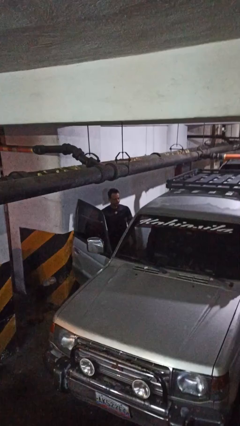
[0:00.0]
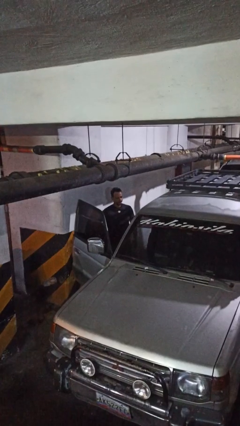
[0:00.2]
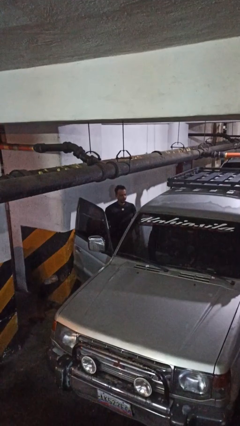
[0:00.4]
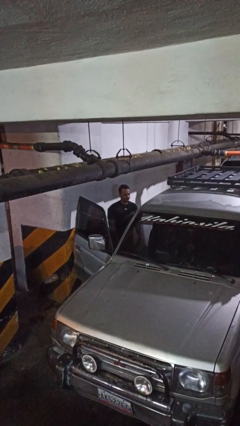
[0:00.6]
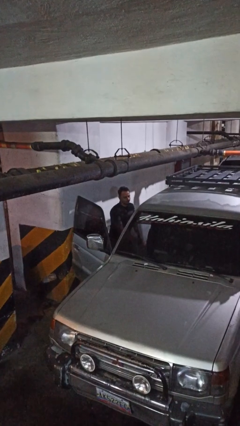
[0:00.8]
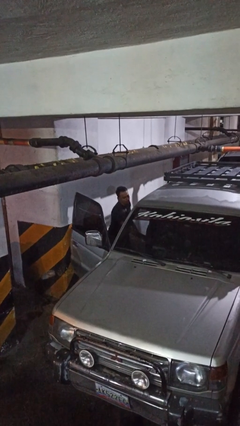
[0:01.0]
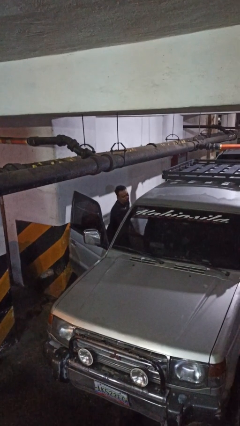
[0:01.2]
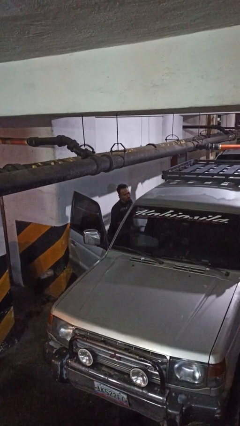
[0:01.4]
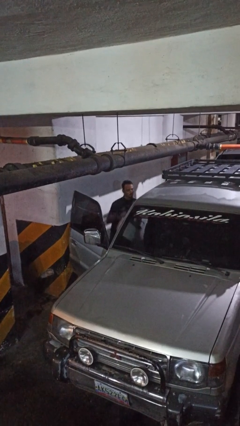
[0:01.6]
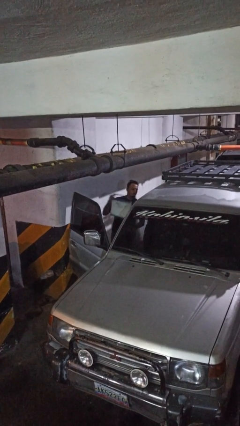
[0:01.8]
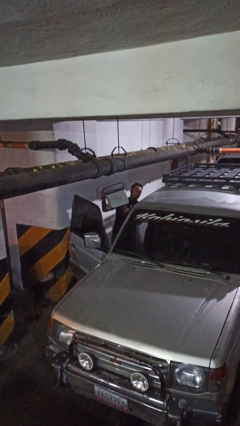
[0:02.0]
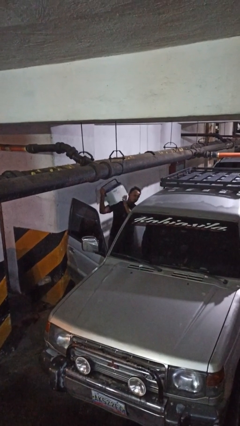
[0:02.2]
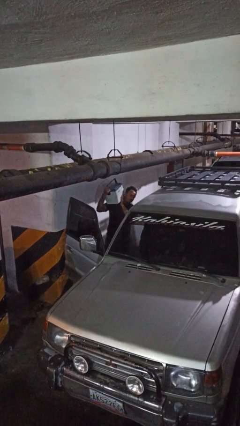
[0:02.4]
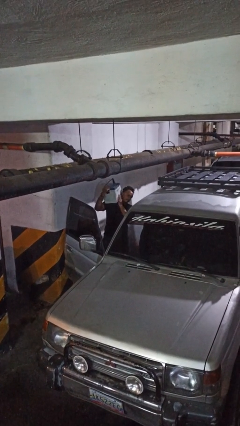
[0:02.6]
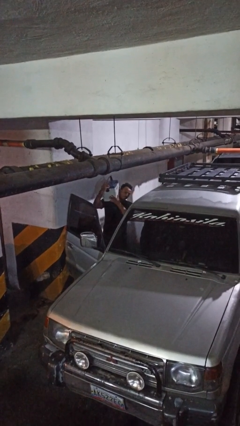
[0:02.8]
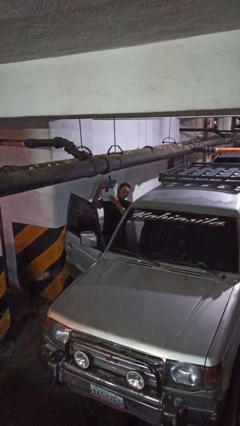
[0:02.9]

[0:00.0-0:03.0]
person unloads car

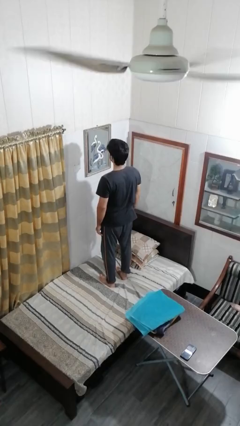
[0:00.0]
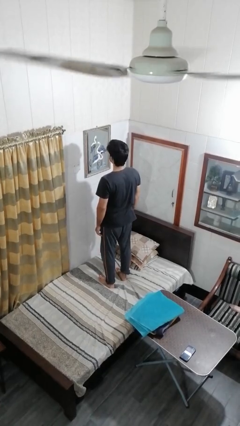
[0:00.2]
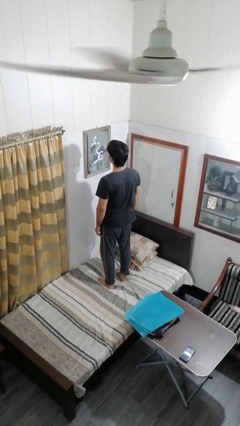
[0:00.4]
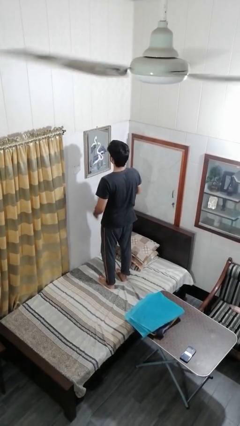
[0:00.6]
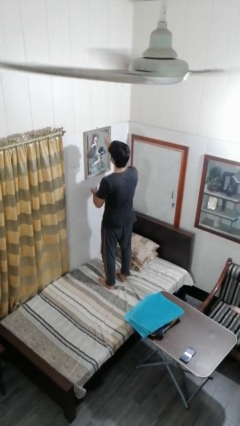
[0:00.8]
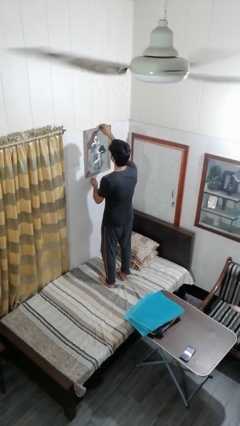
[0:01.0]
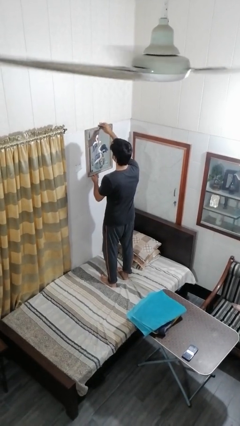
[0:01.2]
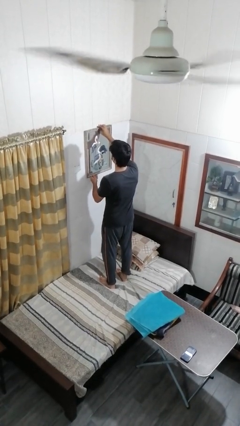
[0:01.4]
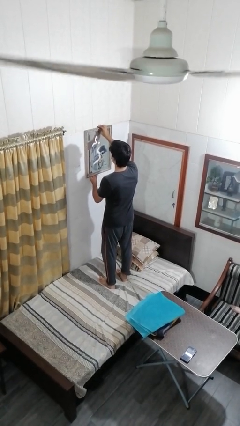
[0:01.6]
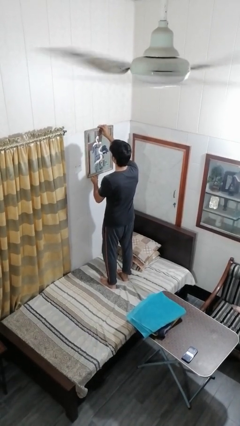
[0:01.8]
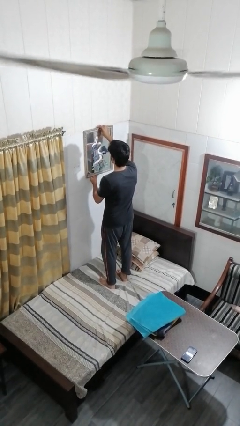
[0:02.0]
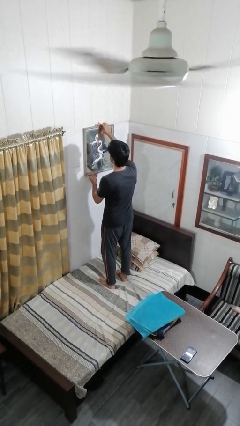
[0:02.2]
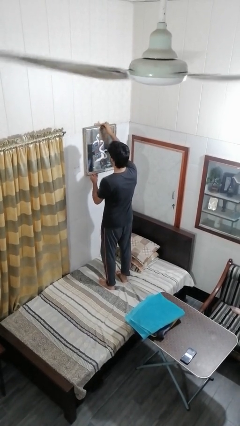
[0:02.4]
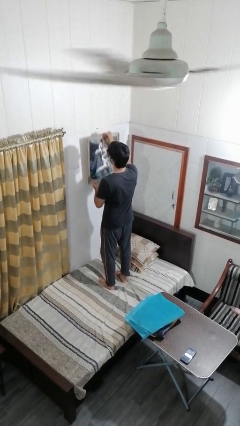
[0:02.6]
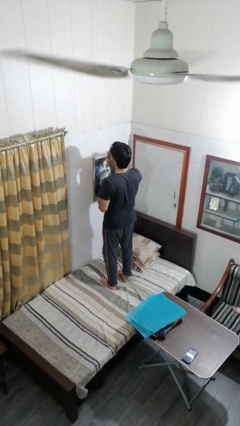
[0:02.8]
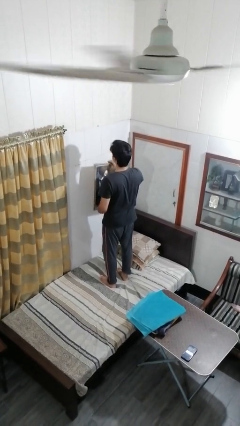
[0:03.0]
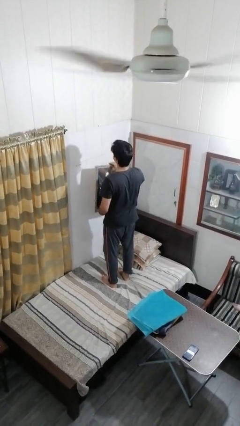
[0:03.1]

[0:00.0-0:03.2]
person takes down picture frame

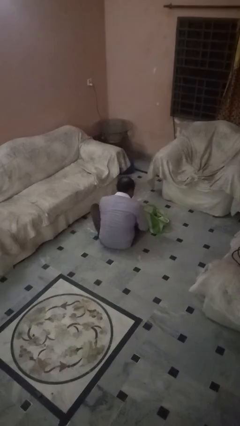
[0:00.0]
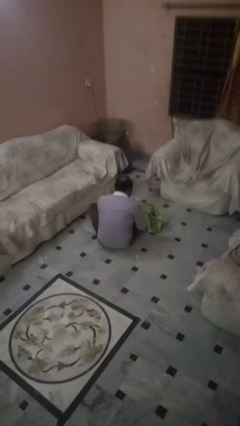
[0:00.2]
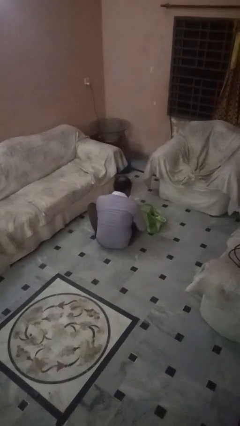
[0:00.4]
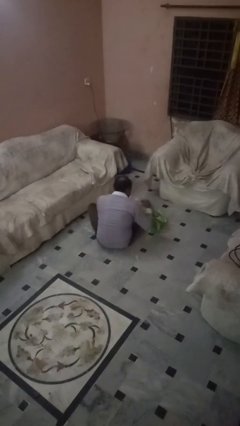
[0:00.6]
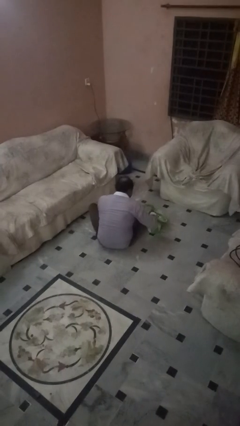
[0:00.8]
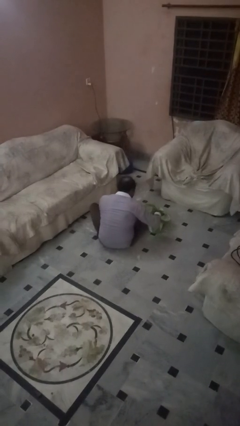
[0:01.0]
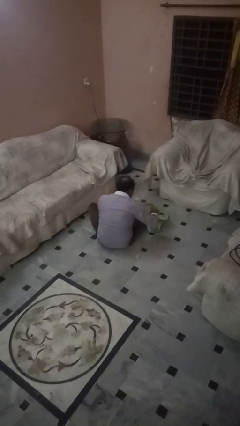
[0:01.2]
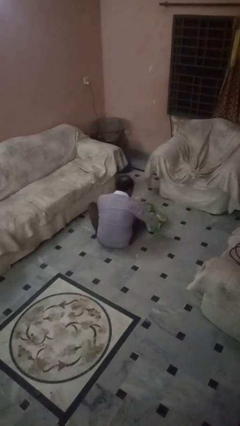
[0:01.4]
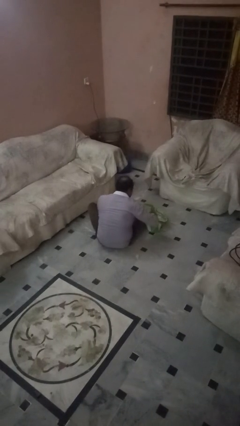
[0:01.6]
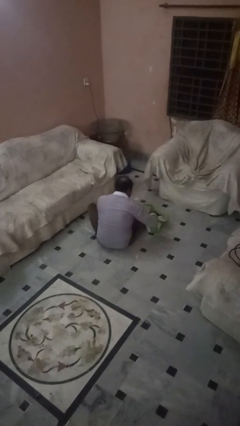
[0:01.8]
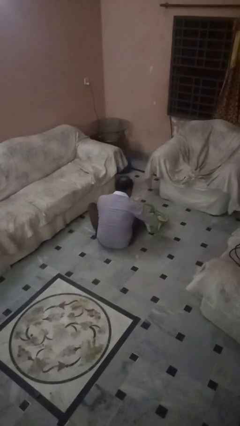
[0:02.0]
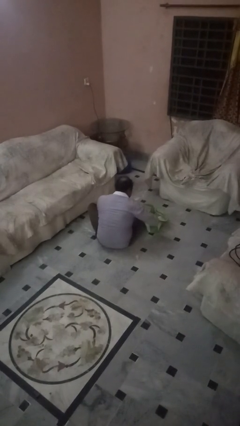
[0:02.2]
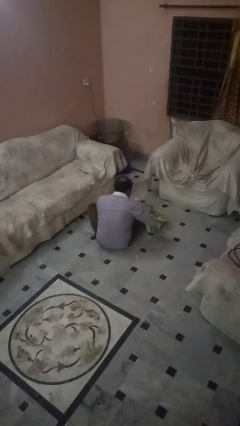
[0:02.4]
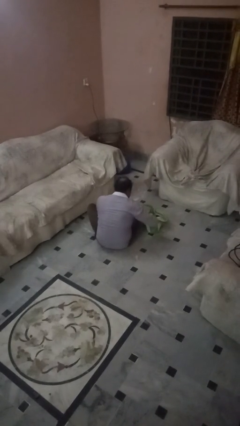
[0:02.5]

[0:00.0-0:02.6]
person searches in bag

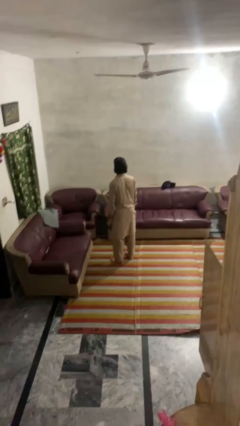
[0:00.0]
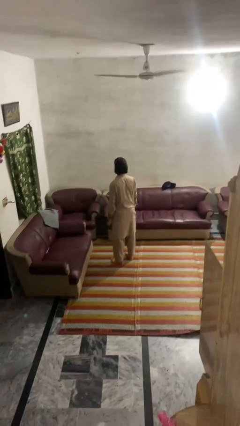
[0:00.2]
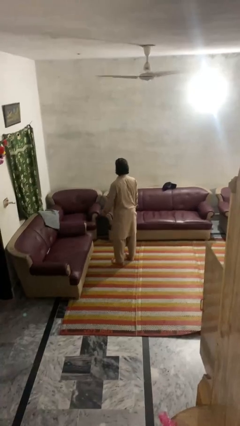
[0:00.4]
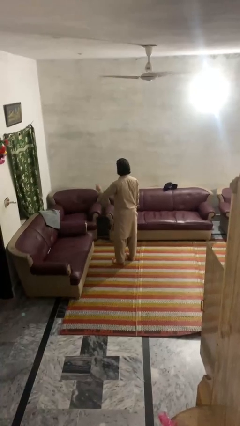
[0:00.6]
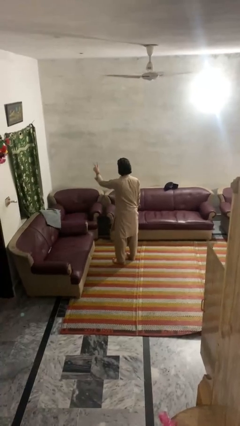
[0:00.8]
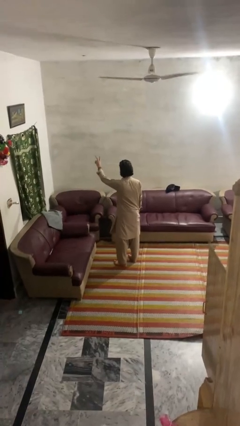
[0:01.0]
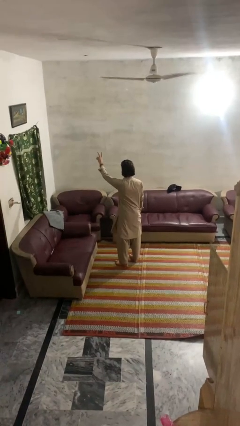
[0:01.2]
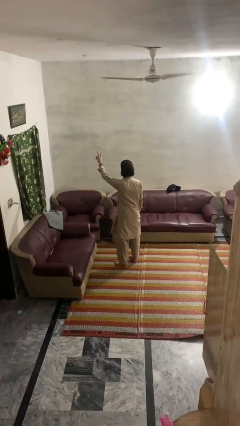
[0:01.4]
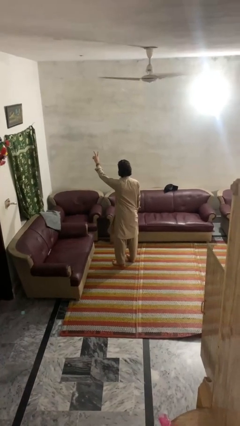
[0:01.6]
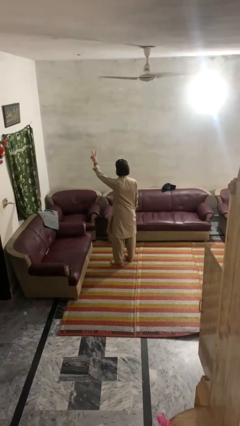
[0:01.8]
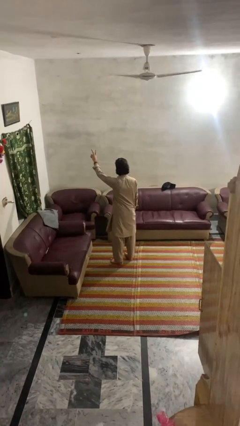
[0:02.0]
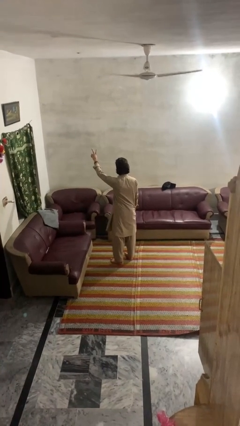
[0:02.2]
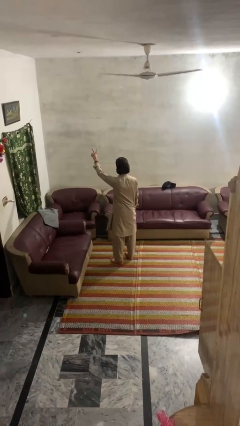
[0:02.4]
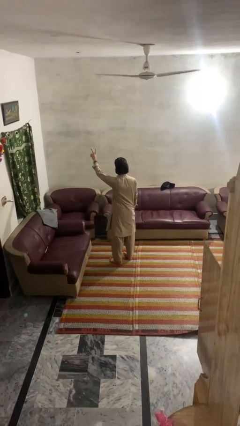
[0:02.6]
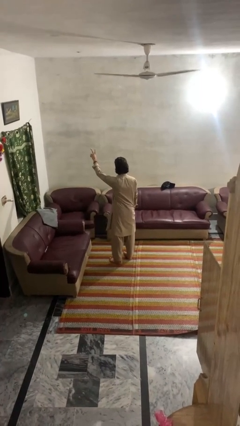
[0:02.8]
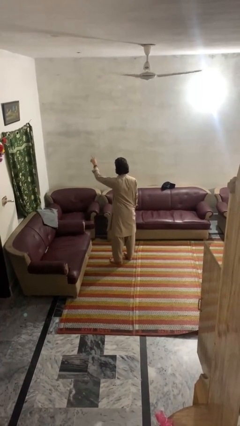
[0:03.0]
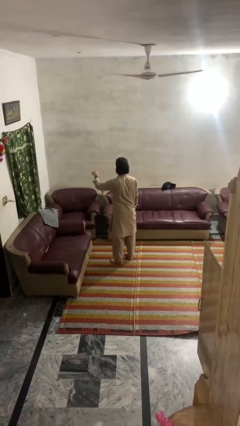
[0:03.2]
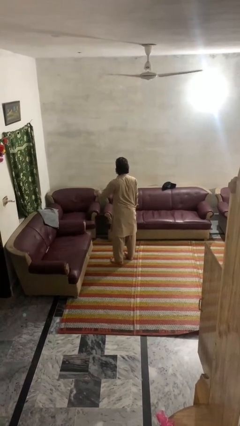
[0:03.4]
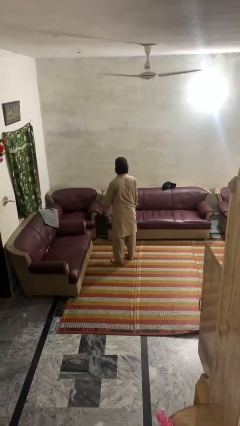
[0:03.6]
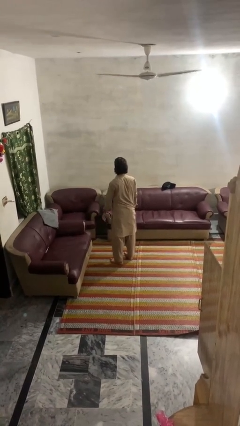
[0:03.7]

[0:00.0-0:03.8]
person gestures peace

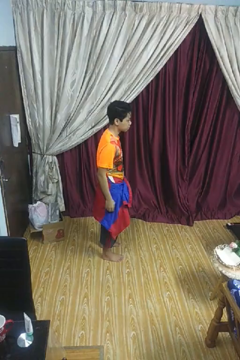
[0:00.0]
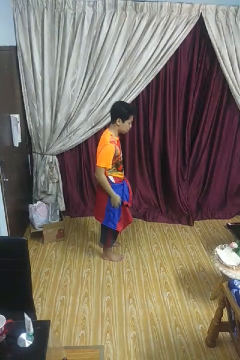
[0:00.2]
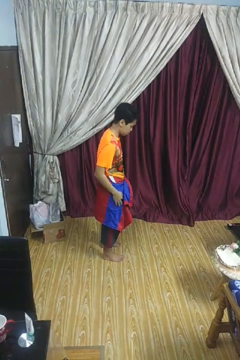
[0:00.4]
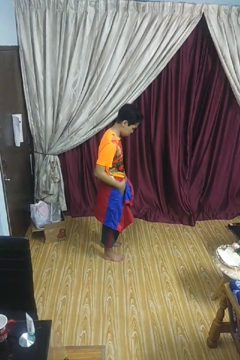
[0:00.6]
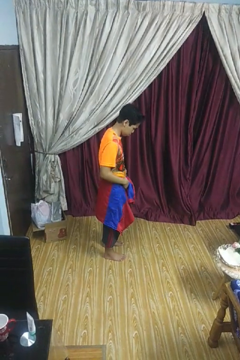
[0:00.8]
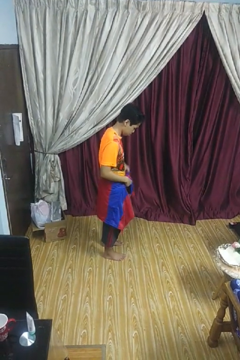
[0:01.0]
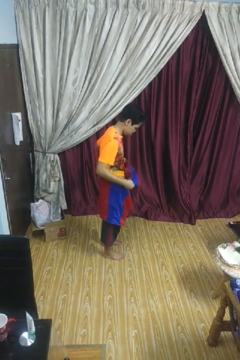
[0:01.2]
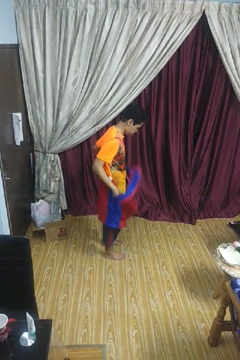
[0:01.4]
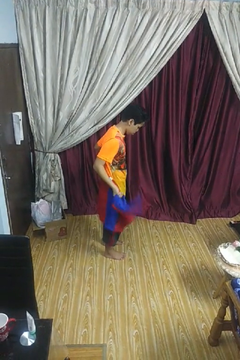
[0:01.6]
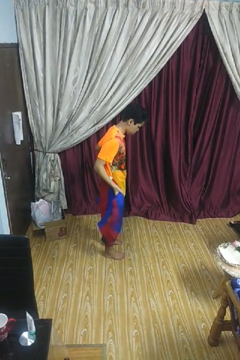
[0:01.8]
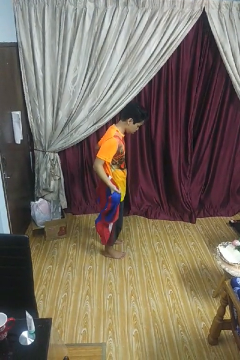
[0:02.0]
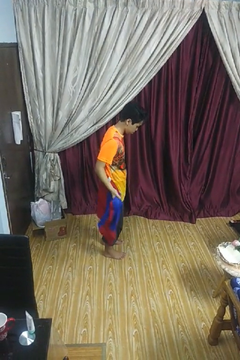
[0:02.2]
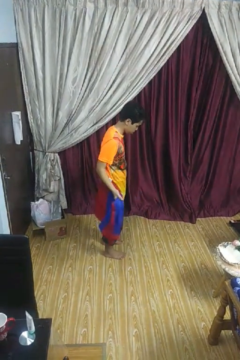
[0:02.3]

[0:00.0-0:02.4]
person unties jacket around waist

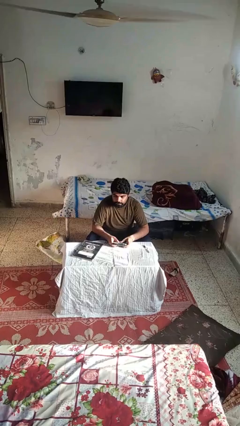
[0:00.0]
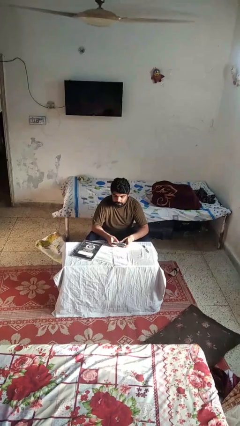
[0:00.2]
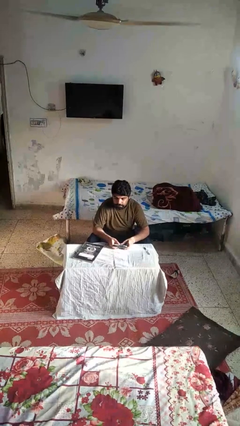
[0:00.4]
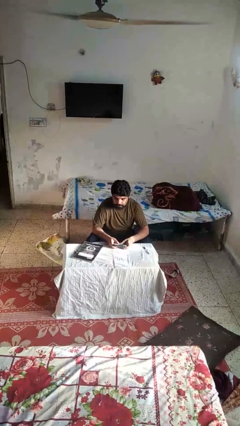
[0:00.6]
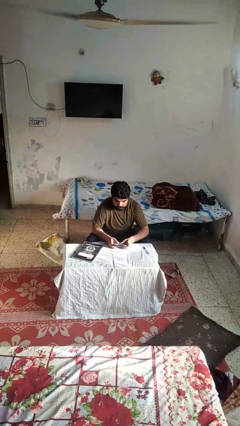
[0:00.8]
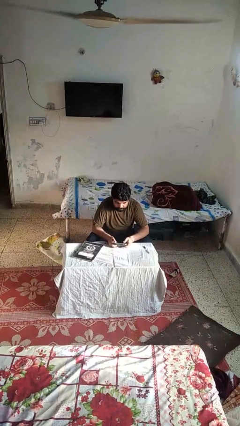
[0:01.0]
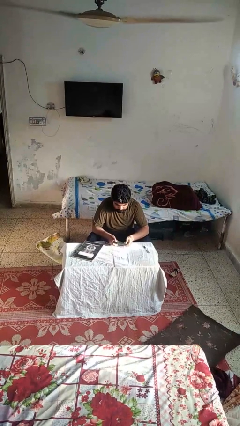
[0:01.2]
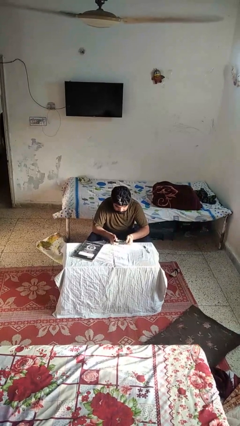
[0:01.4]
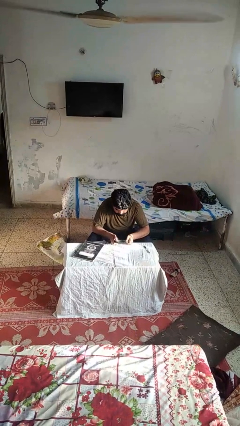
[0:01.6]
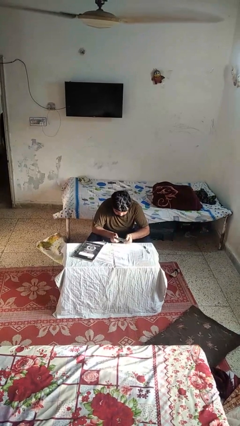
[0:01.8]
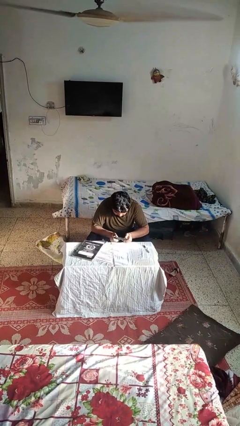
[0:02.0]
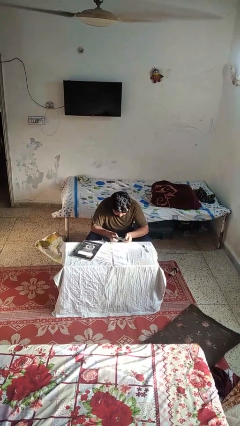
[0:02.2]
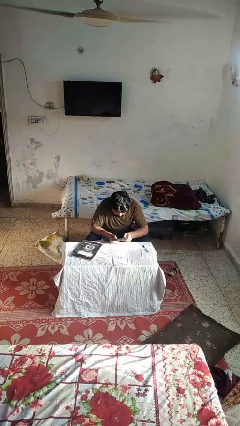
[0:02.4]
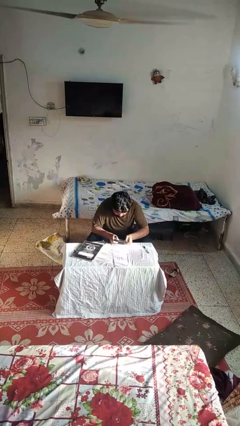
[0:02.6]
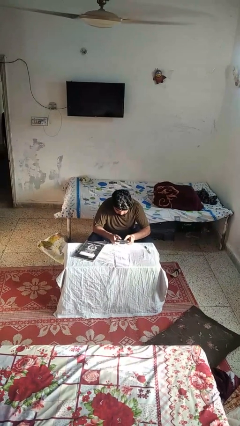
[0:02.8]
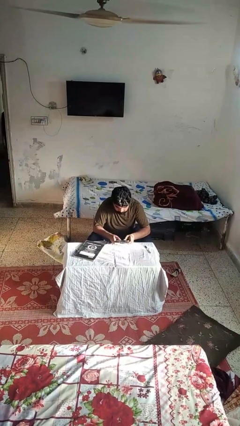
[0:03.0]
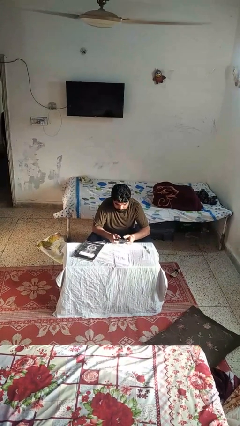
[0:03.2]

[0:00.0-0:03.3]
person interacts with handheld game

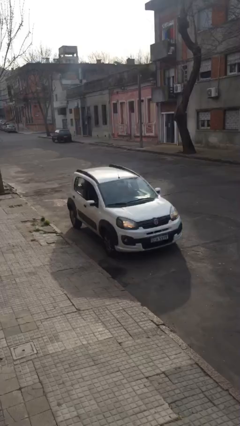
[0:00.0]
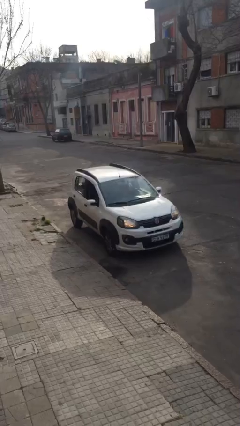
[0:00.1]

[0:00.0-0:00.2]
car drops off person
